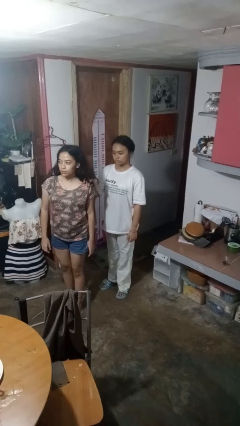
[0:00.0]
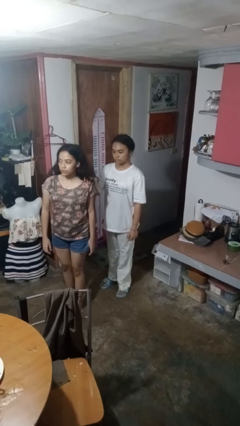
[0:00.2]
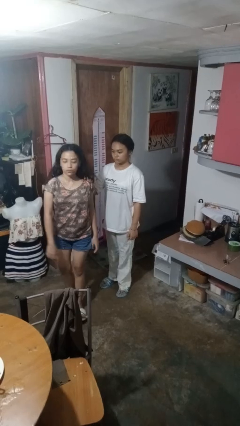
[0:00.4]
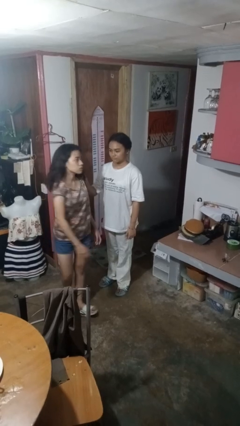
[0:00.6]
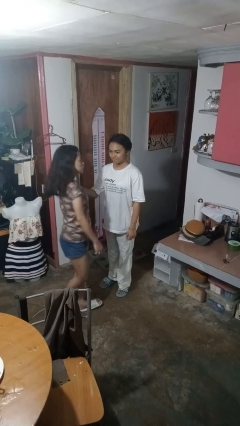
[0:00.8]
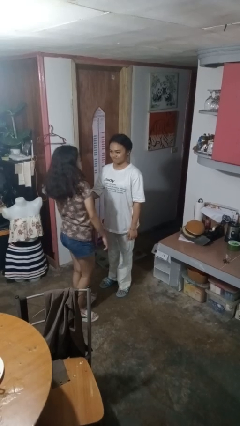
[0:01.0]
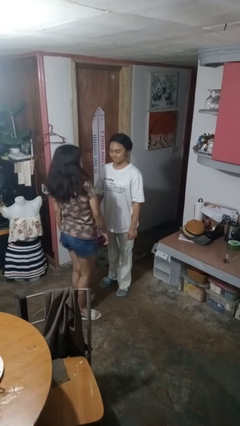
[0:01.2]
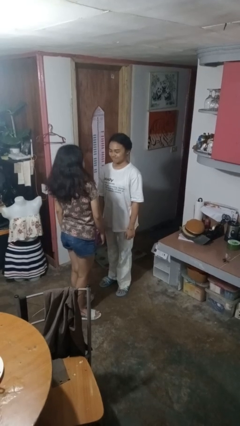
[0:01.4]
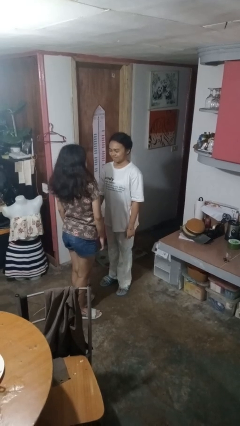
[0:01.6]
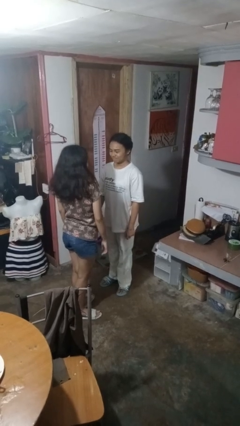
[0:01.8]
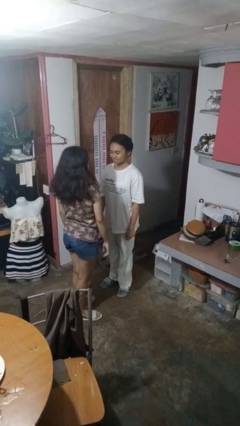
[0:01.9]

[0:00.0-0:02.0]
person spins person around

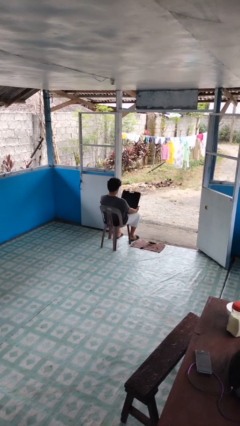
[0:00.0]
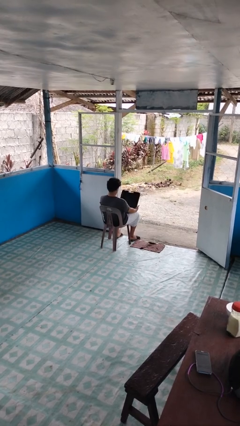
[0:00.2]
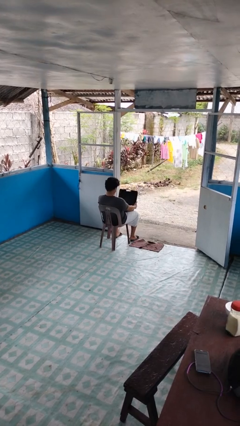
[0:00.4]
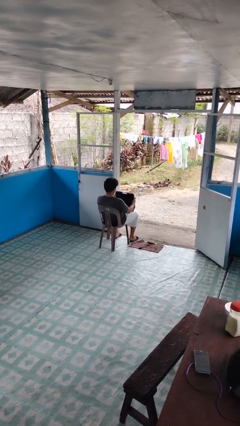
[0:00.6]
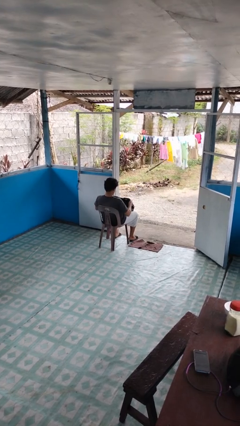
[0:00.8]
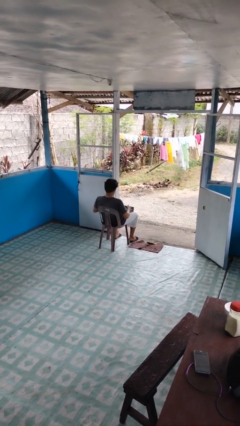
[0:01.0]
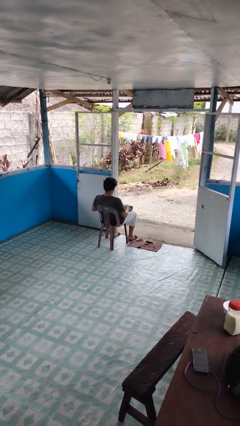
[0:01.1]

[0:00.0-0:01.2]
person closes suitcase

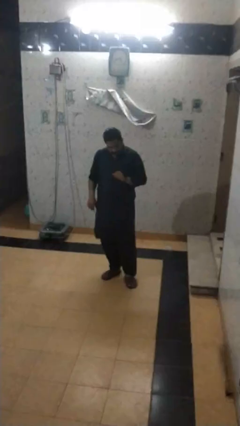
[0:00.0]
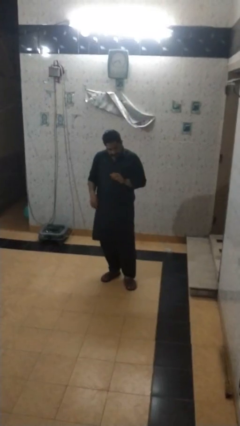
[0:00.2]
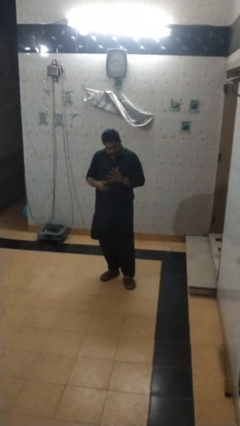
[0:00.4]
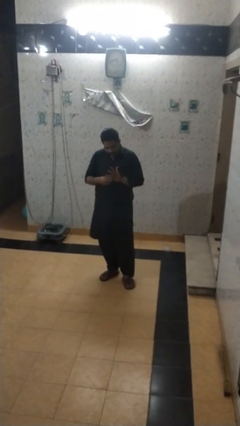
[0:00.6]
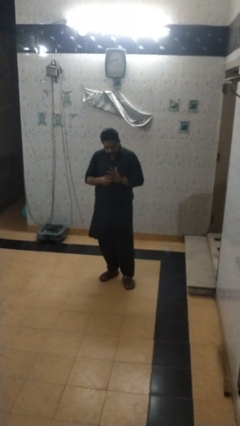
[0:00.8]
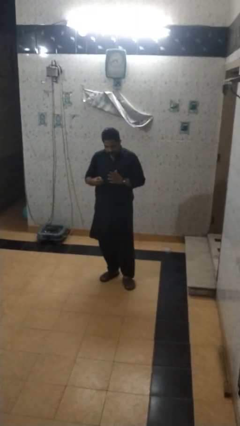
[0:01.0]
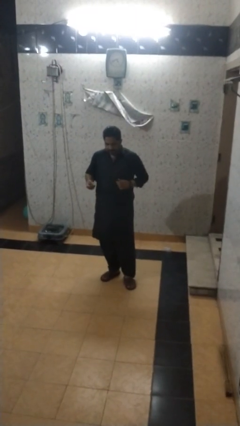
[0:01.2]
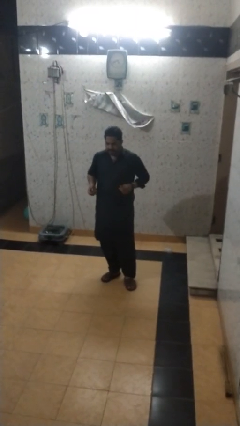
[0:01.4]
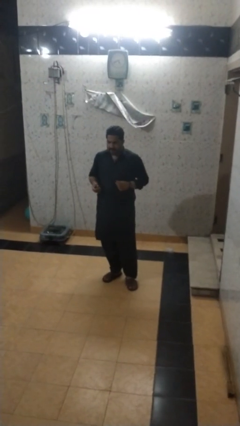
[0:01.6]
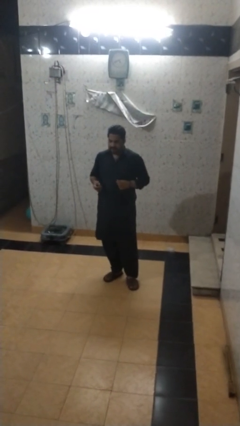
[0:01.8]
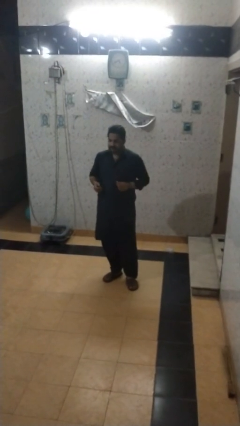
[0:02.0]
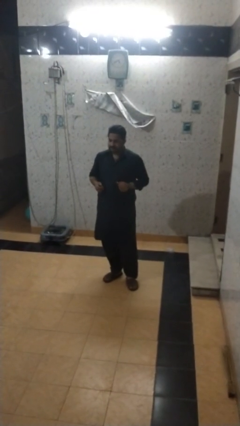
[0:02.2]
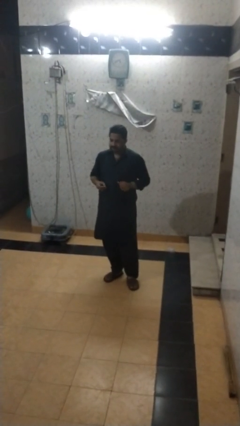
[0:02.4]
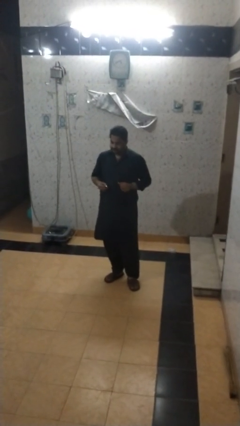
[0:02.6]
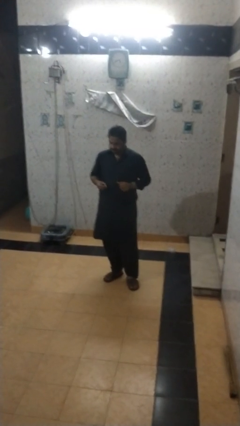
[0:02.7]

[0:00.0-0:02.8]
person takes off ring

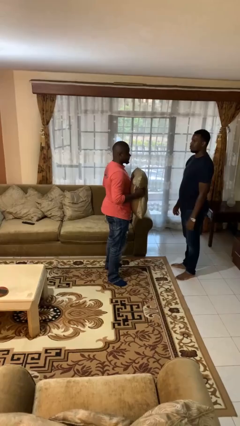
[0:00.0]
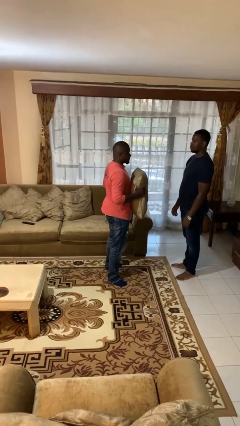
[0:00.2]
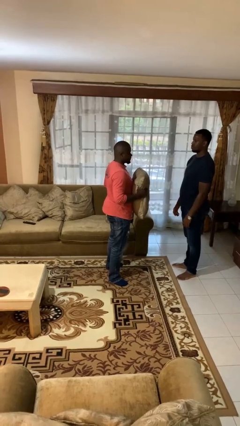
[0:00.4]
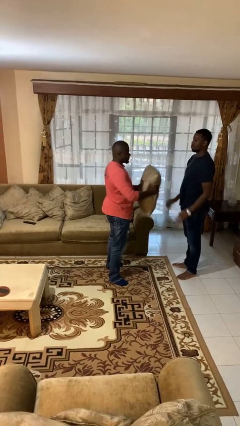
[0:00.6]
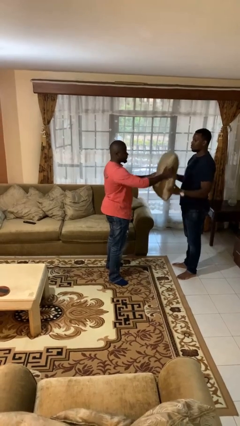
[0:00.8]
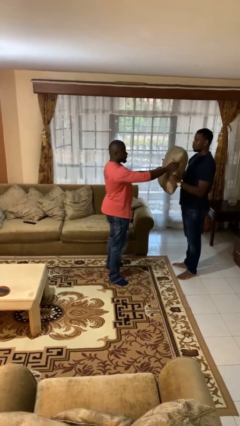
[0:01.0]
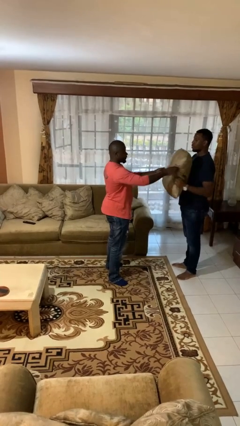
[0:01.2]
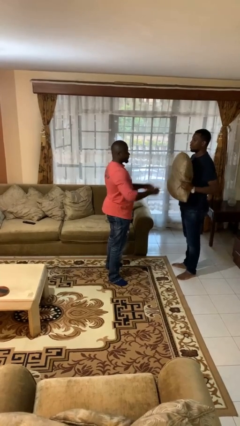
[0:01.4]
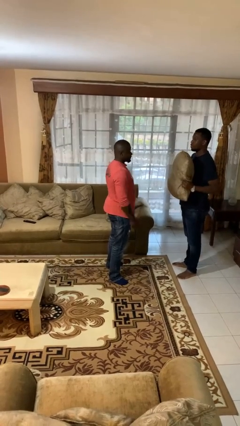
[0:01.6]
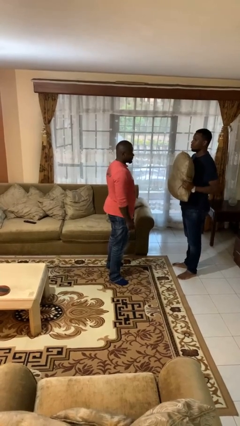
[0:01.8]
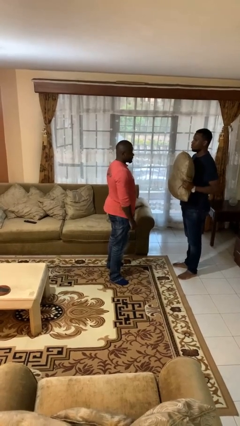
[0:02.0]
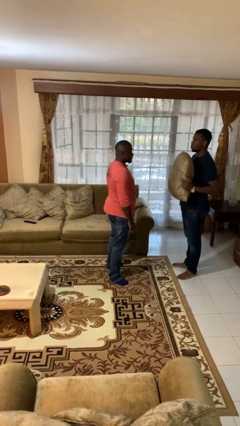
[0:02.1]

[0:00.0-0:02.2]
person transfers object to person

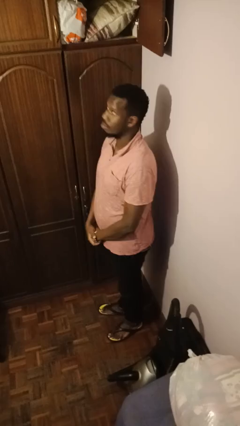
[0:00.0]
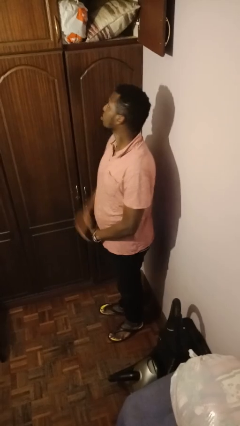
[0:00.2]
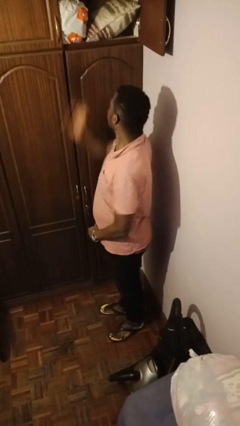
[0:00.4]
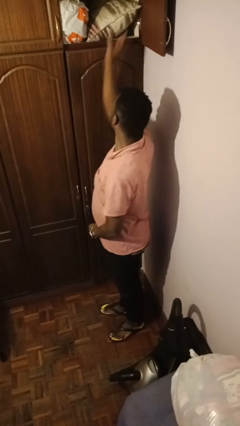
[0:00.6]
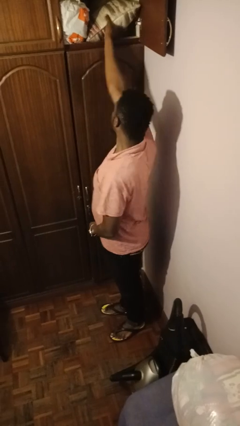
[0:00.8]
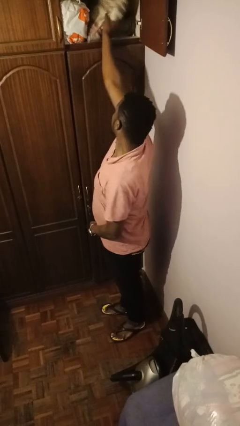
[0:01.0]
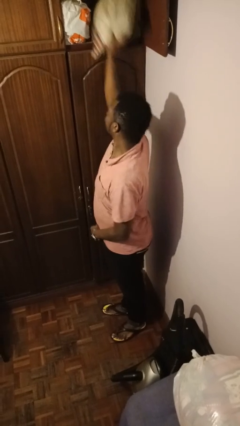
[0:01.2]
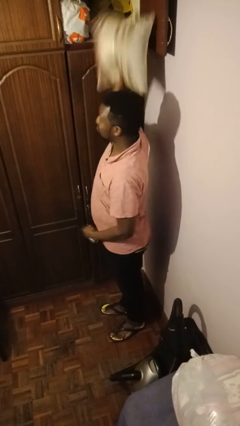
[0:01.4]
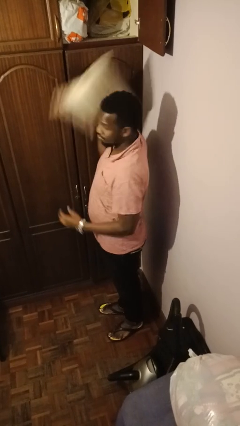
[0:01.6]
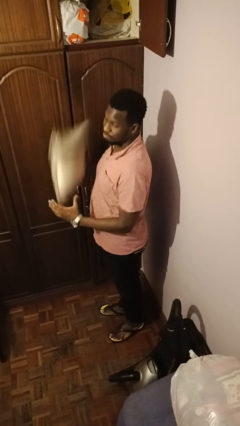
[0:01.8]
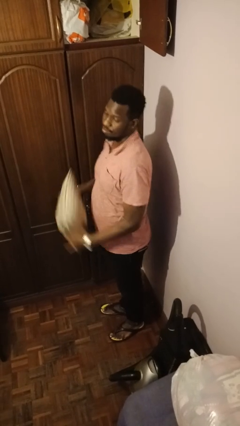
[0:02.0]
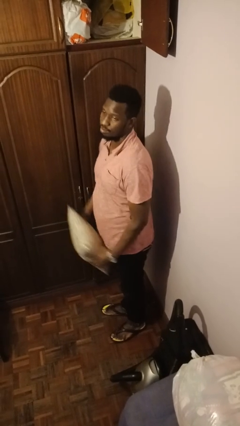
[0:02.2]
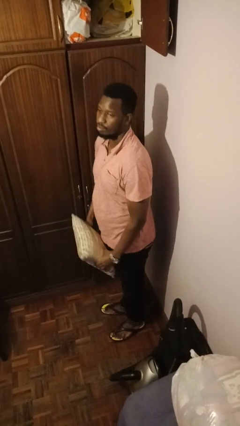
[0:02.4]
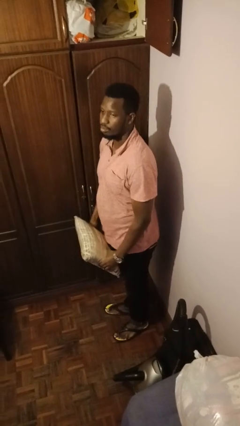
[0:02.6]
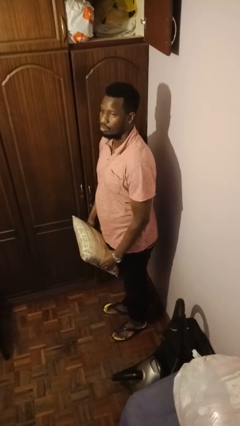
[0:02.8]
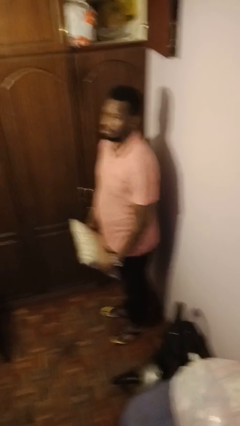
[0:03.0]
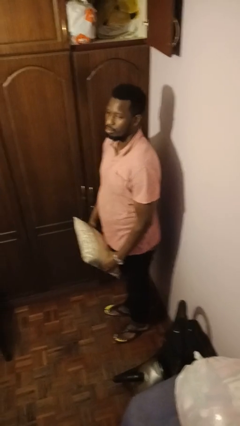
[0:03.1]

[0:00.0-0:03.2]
person picks up object from shelf

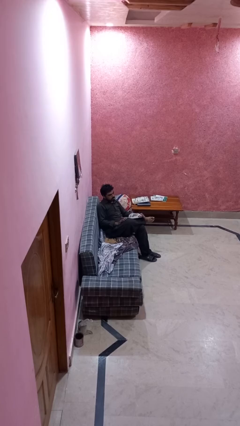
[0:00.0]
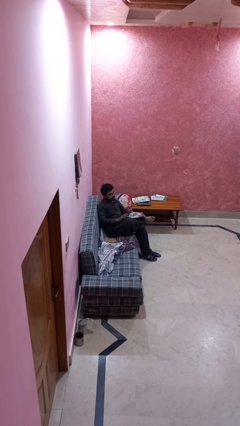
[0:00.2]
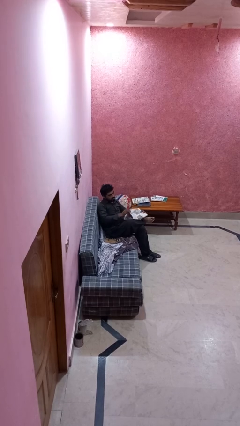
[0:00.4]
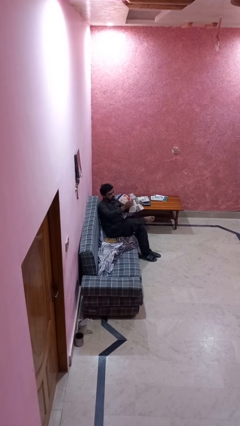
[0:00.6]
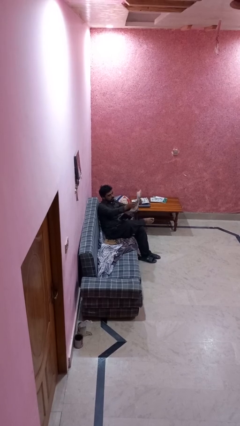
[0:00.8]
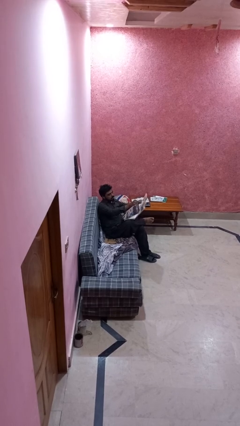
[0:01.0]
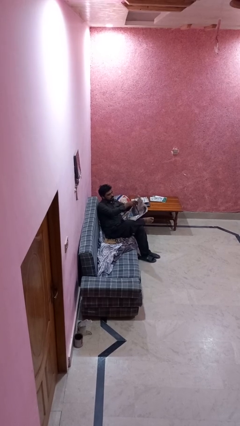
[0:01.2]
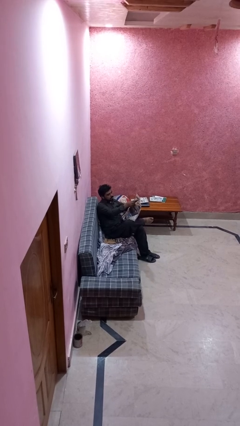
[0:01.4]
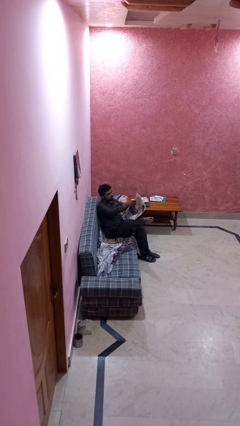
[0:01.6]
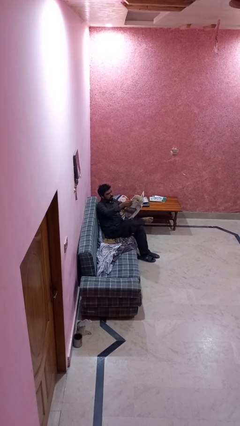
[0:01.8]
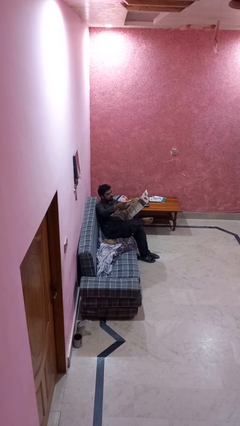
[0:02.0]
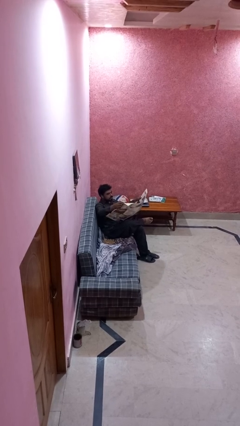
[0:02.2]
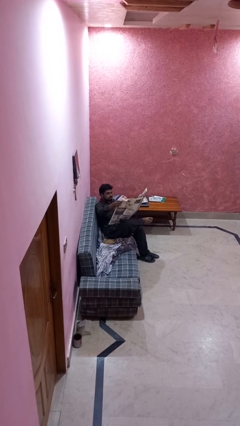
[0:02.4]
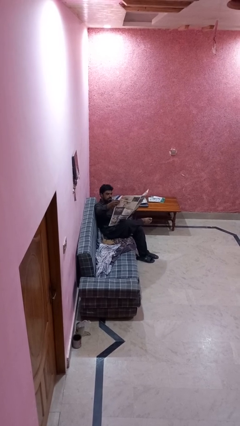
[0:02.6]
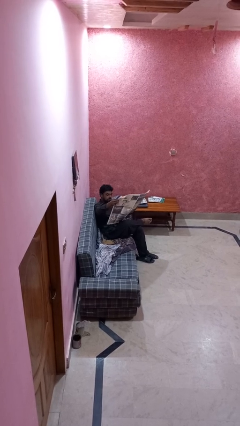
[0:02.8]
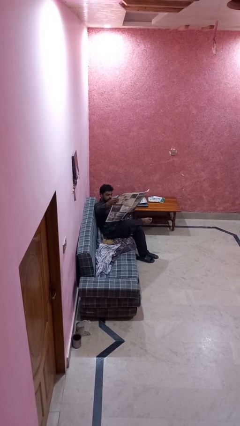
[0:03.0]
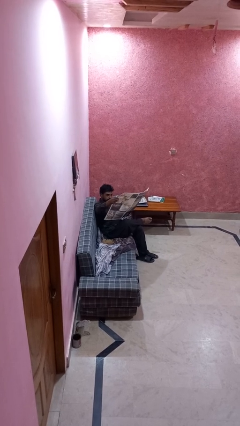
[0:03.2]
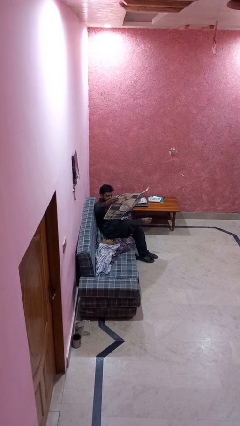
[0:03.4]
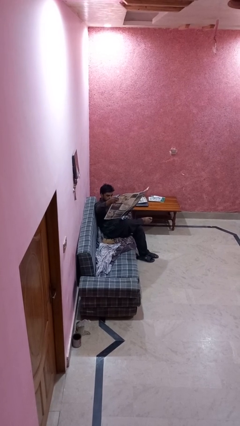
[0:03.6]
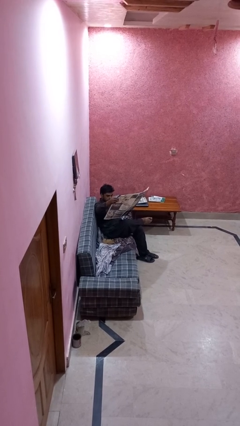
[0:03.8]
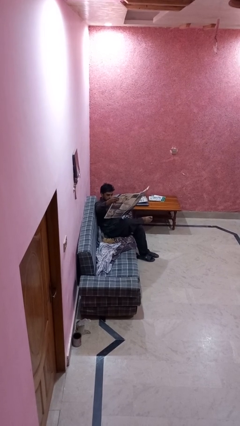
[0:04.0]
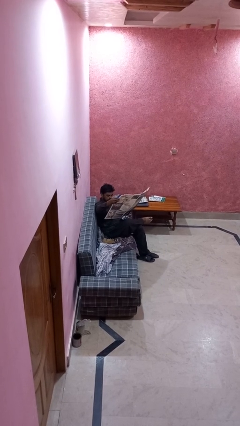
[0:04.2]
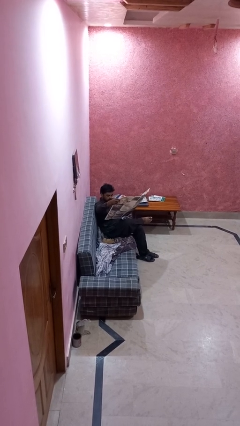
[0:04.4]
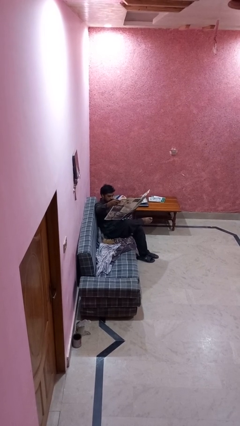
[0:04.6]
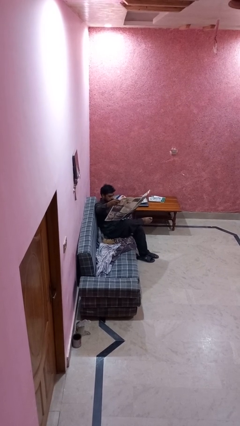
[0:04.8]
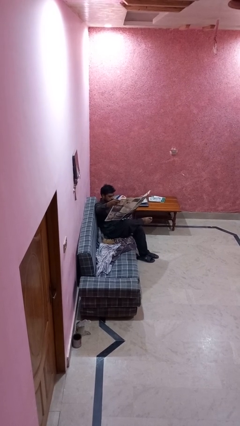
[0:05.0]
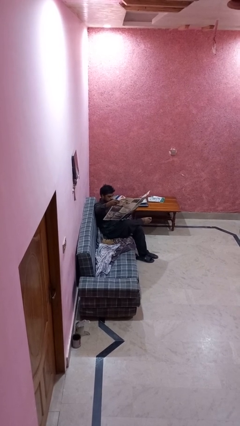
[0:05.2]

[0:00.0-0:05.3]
person reads newspaper

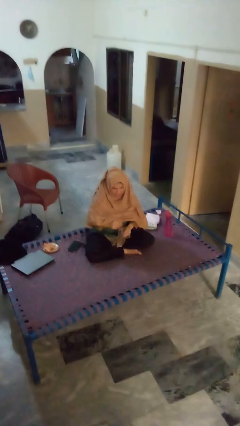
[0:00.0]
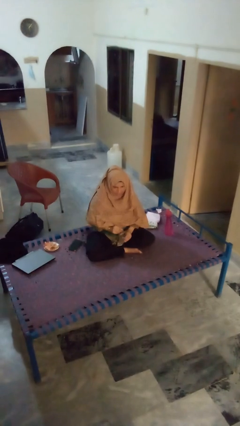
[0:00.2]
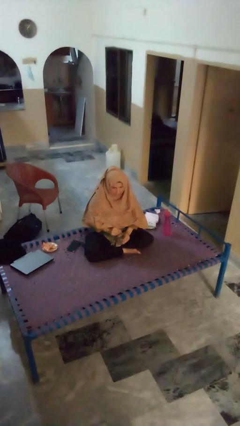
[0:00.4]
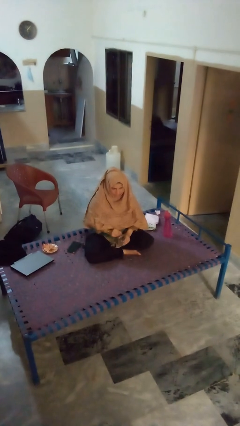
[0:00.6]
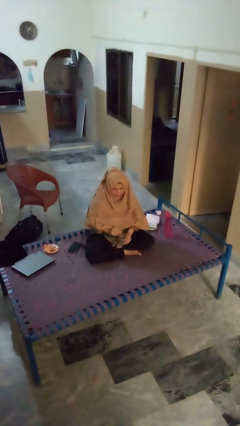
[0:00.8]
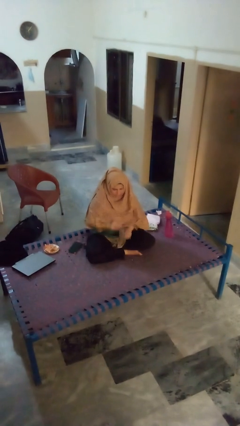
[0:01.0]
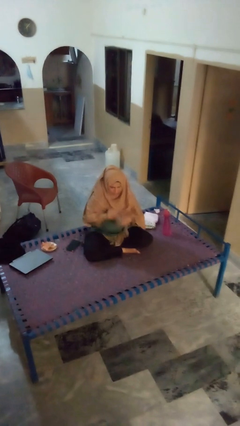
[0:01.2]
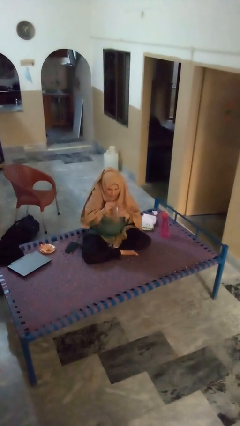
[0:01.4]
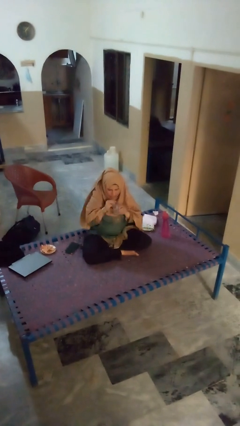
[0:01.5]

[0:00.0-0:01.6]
person drinks from straw
